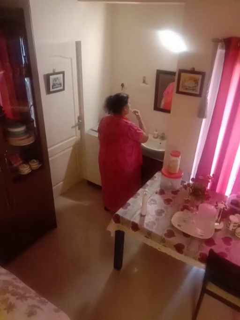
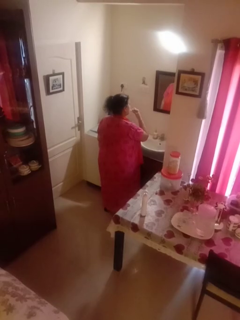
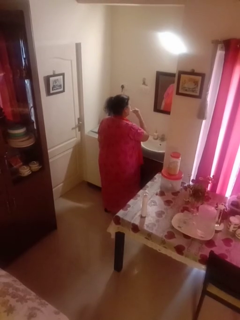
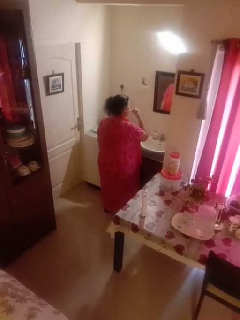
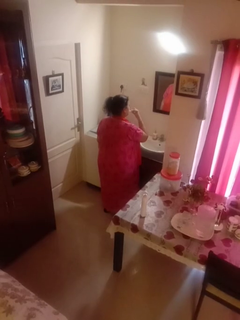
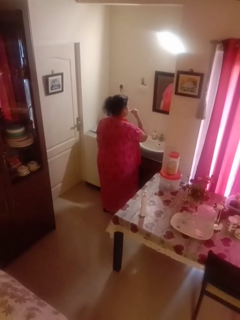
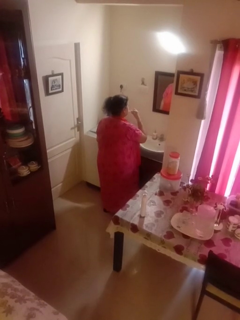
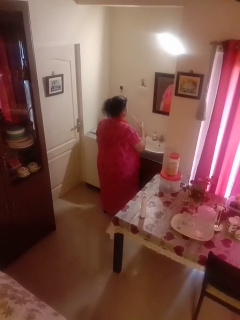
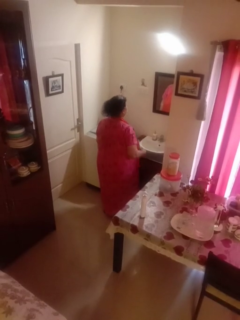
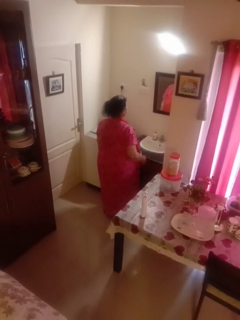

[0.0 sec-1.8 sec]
person brushes teeth

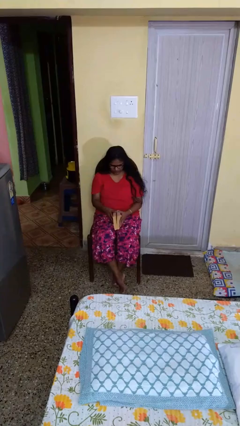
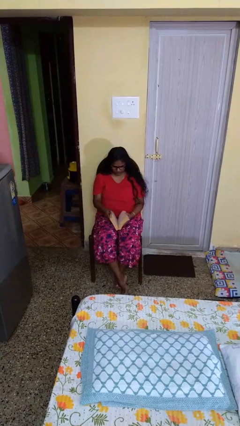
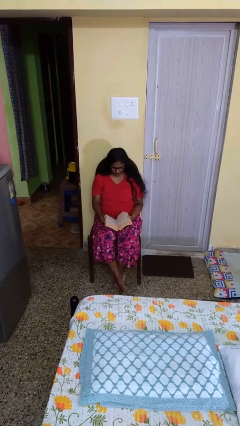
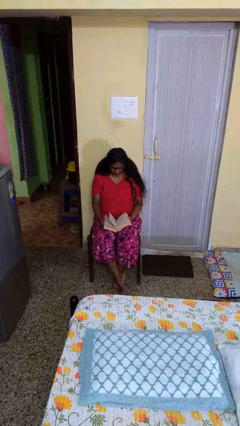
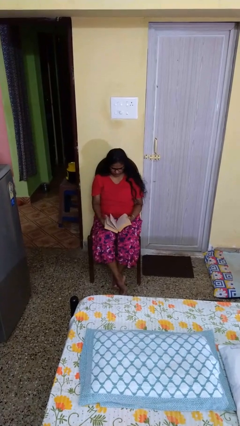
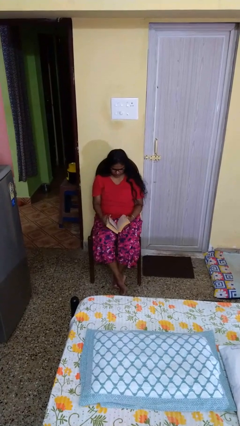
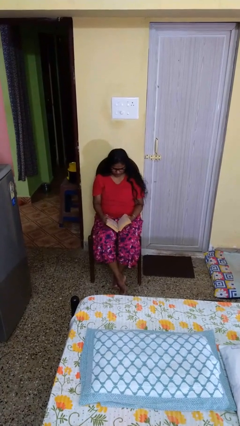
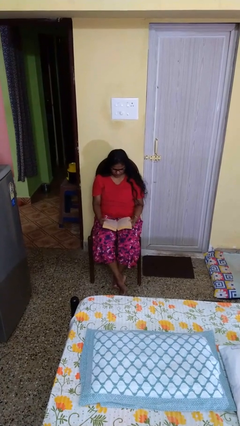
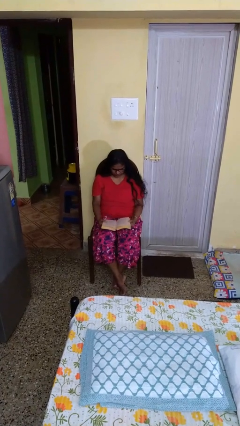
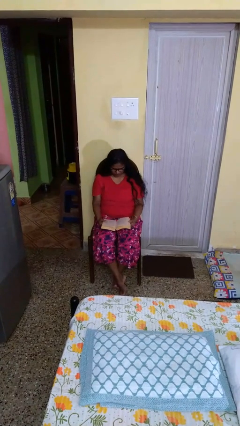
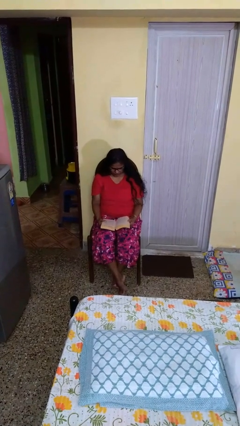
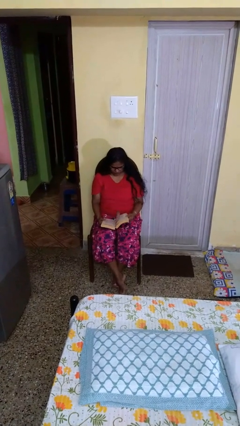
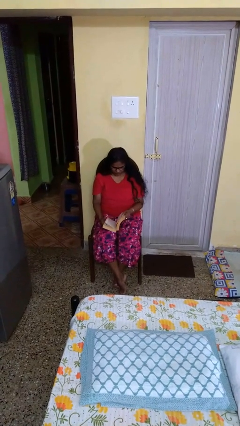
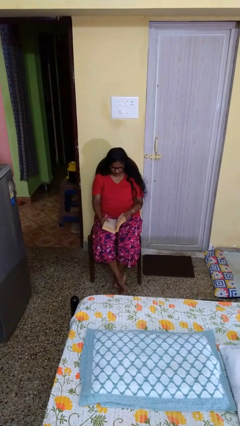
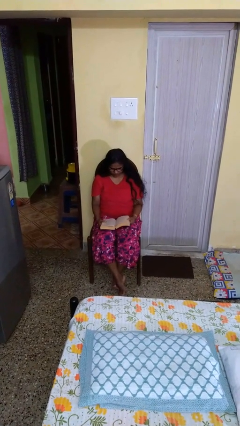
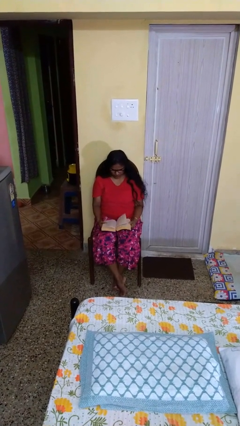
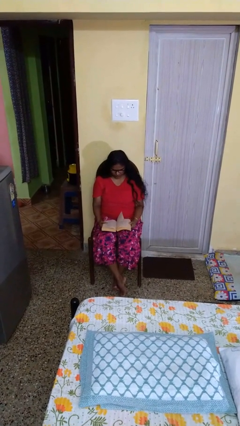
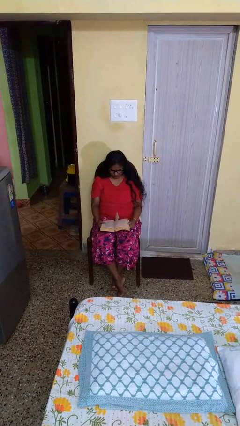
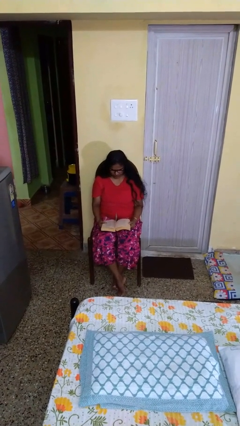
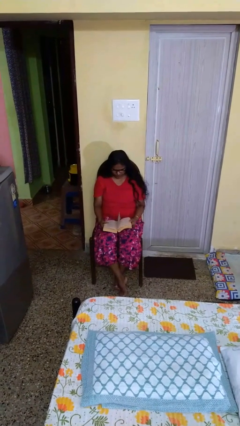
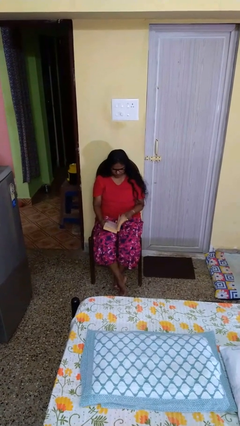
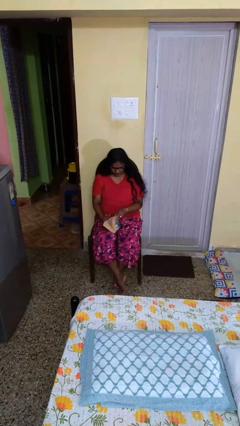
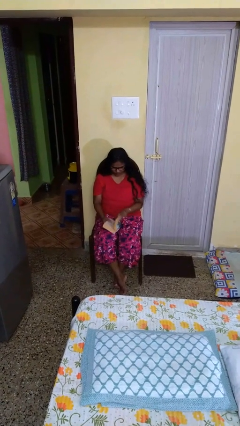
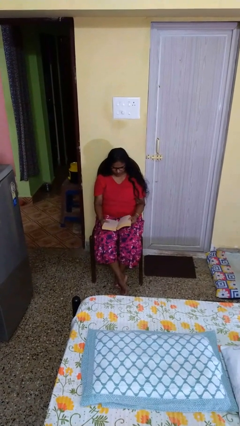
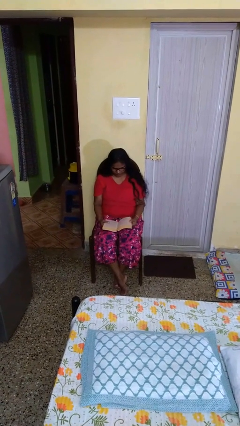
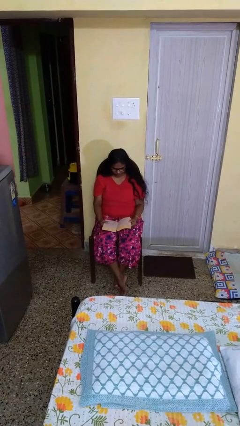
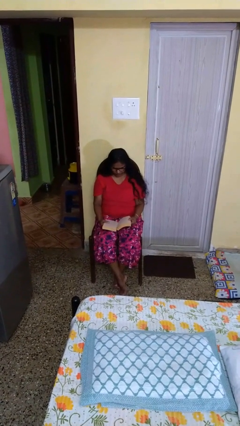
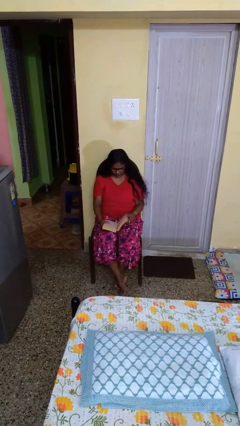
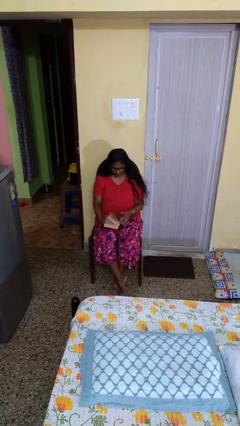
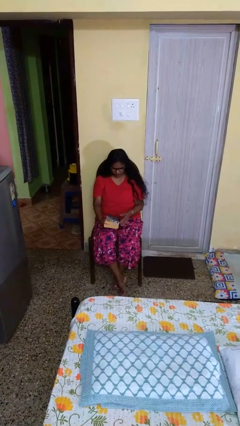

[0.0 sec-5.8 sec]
person reads book

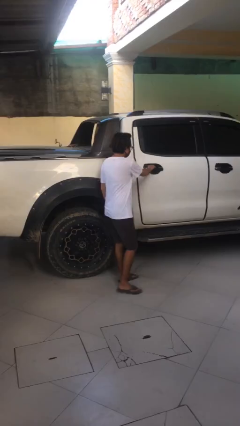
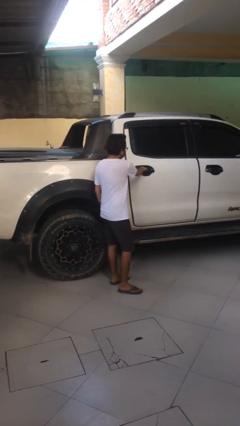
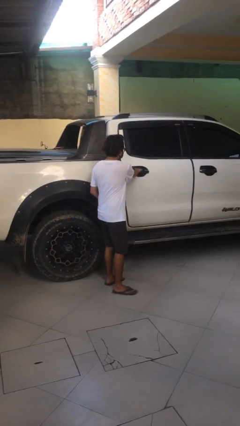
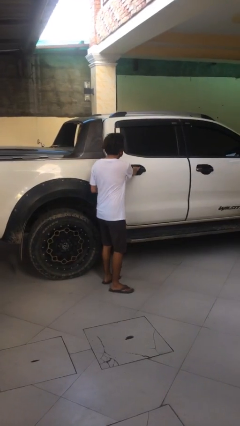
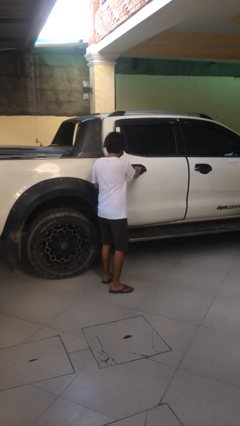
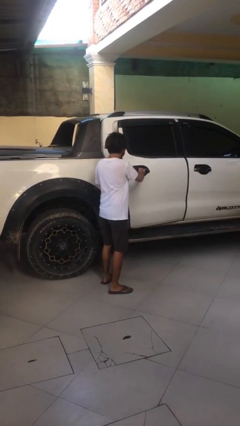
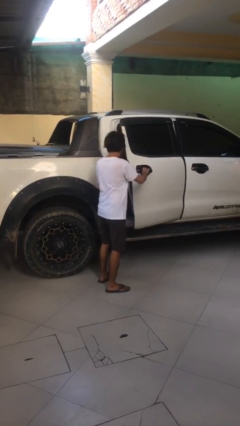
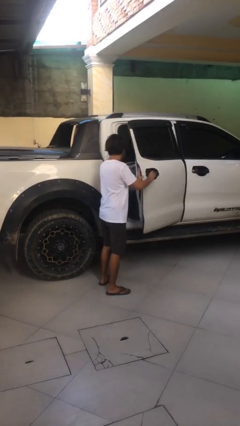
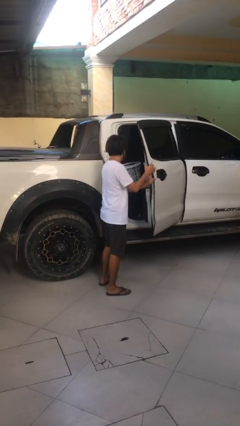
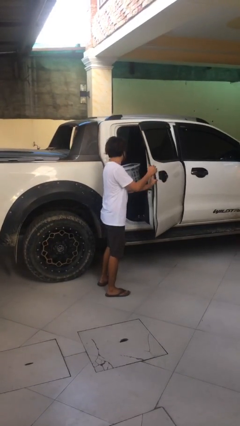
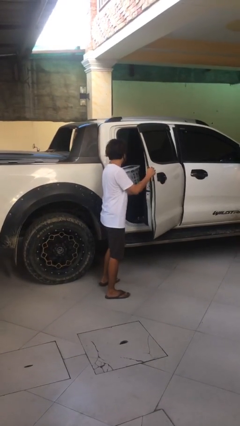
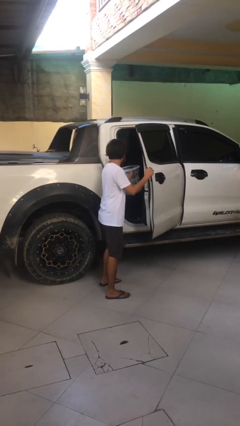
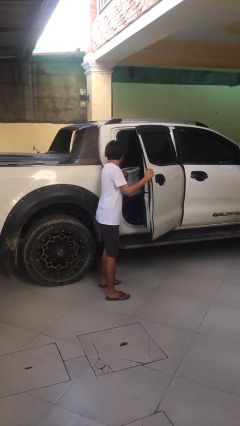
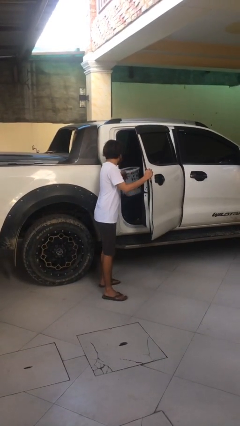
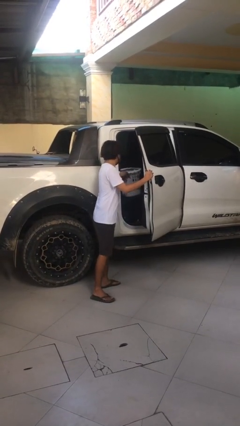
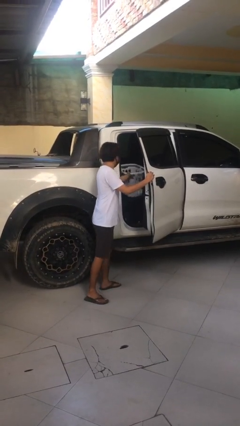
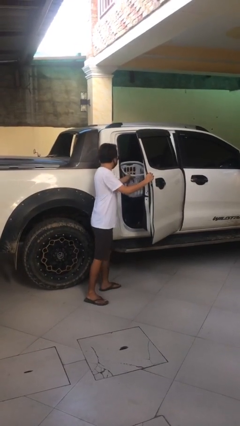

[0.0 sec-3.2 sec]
person opens car door

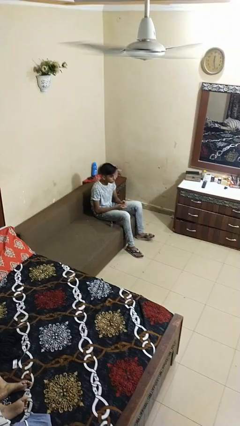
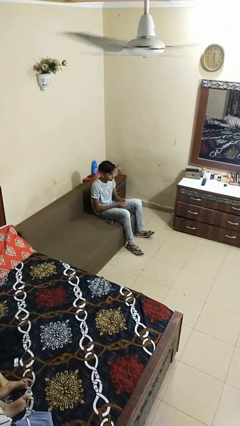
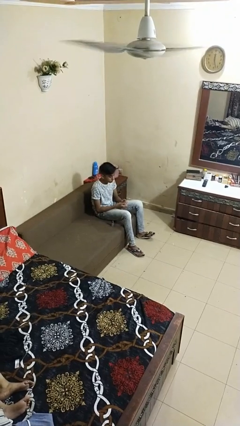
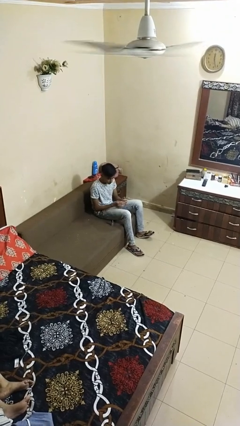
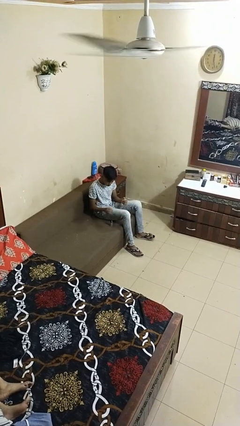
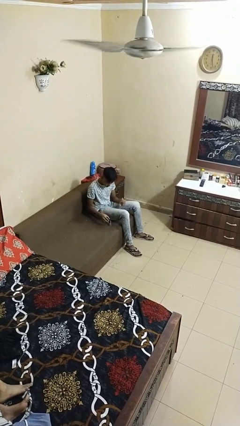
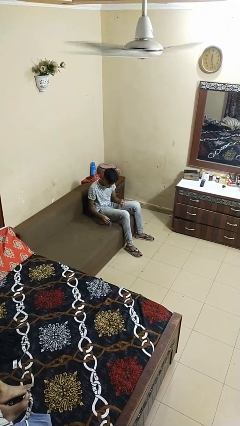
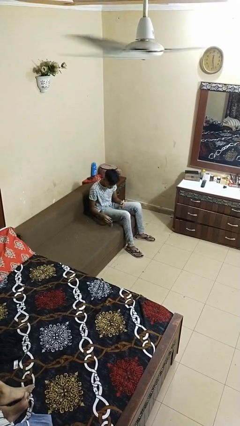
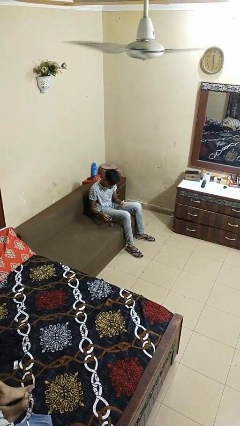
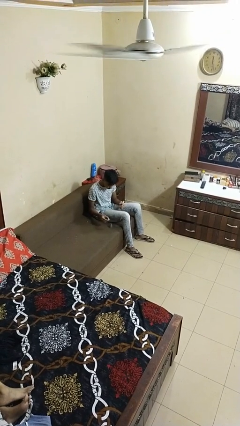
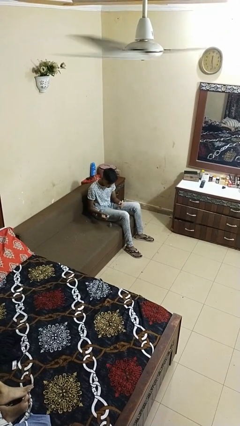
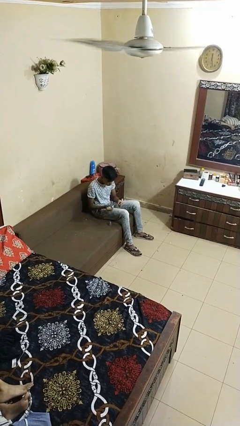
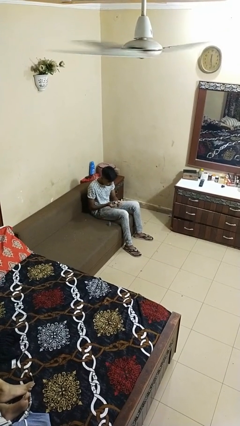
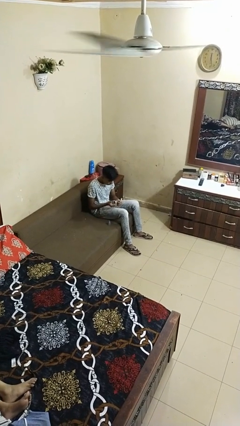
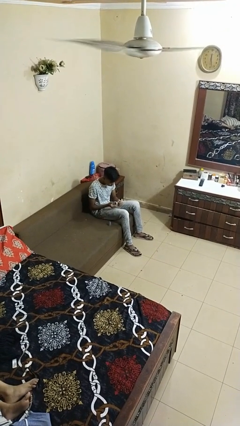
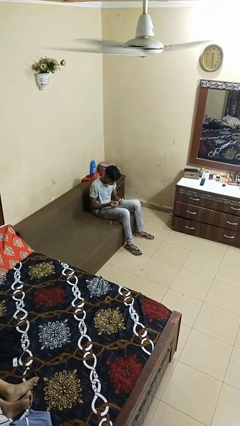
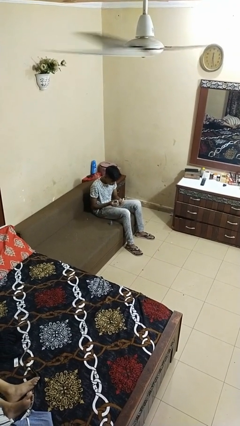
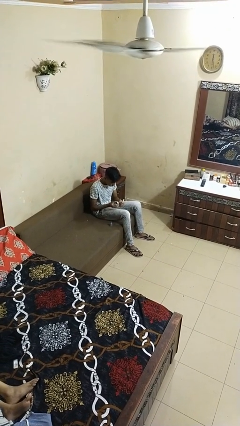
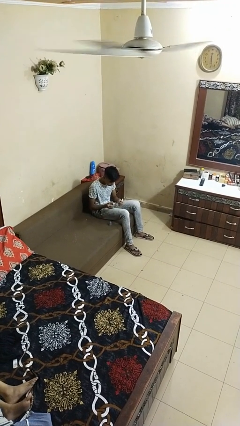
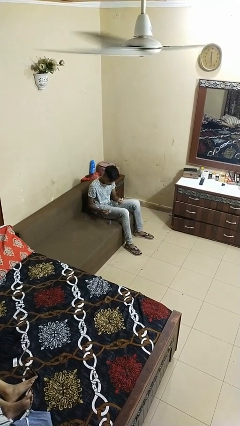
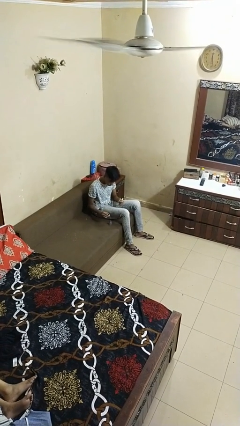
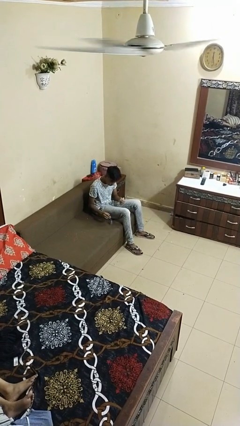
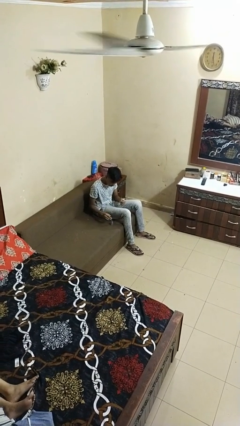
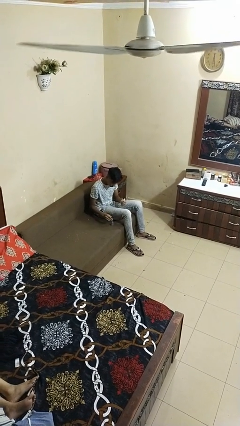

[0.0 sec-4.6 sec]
person paints fingernails

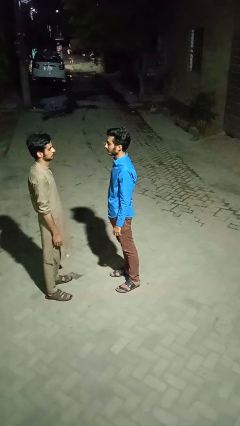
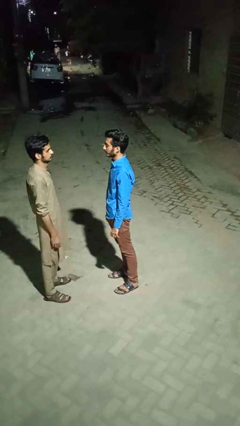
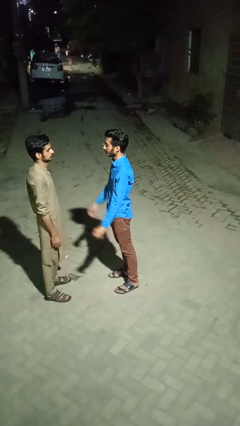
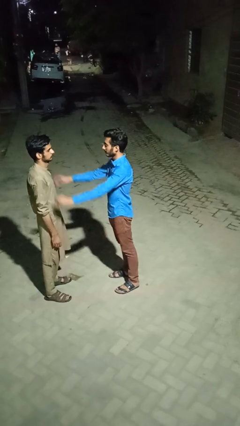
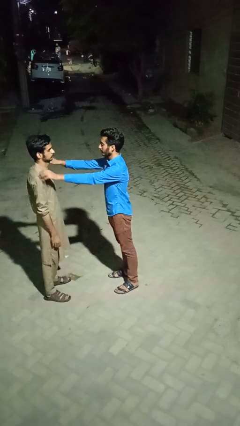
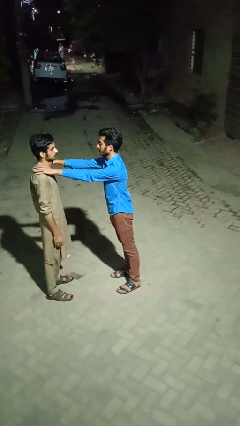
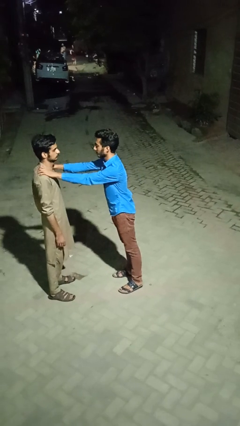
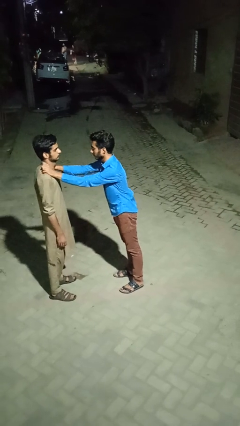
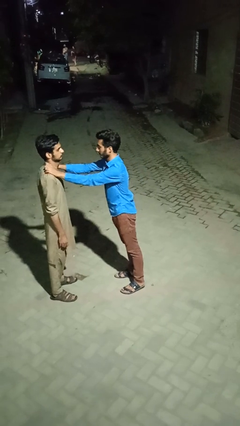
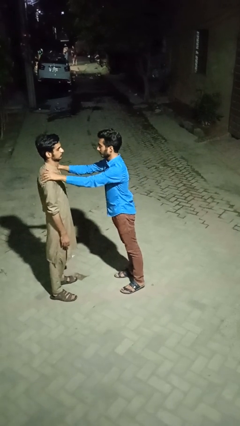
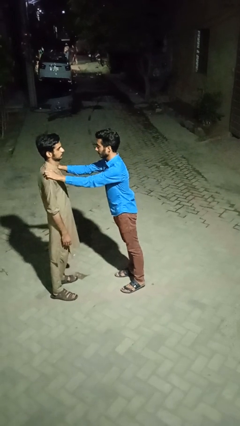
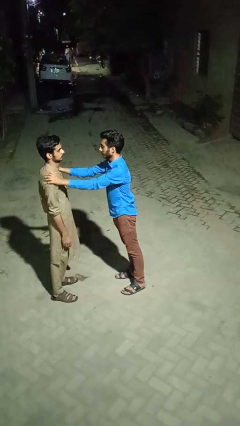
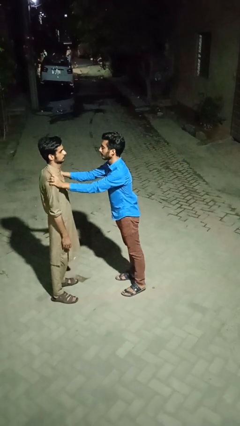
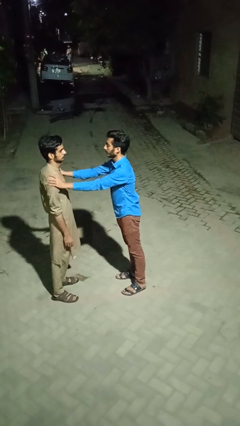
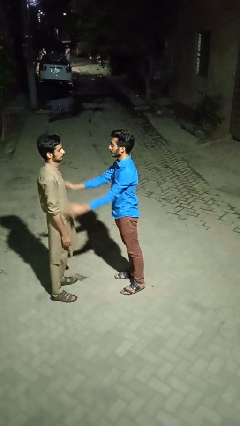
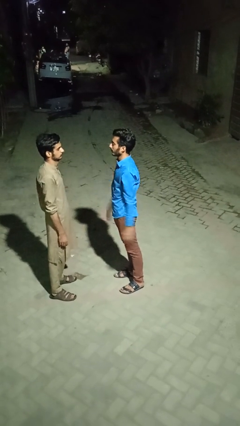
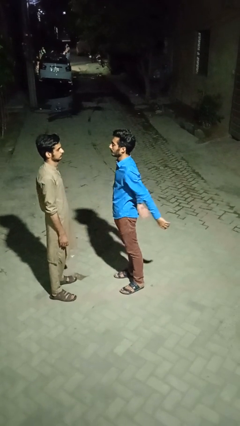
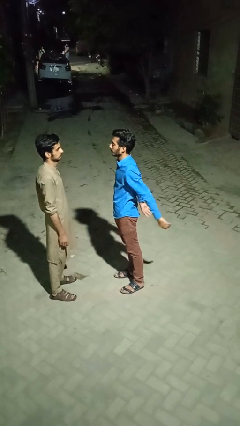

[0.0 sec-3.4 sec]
person pounds shoulders of person
